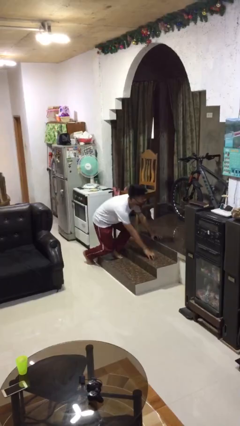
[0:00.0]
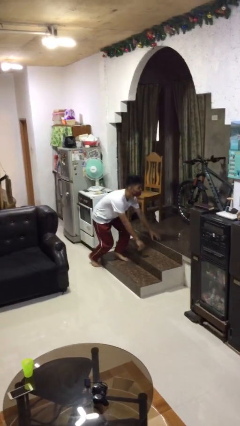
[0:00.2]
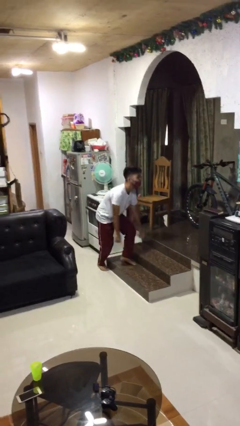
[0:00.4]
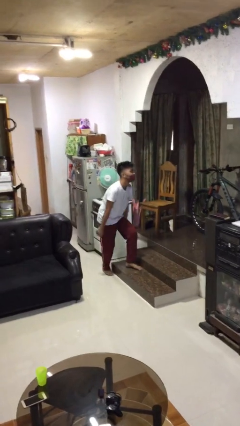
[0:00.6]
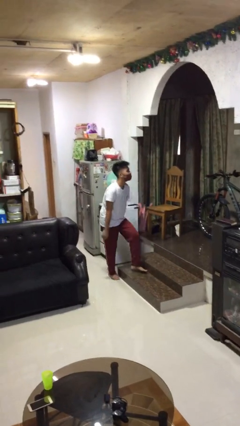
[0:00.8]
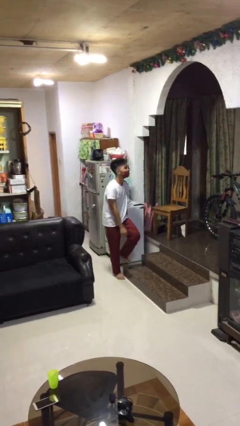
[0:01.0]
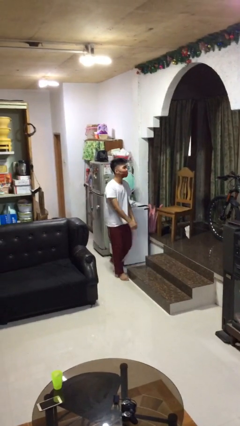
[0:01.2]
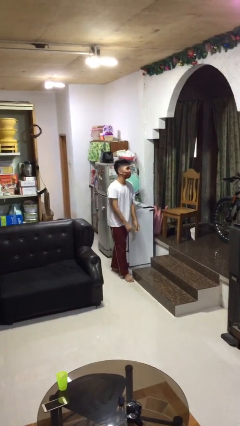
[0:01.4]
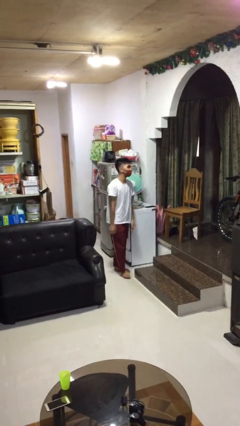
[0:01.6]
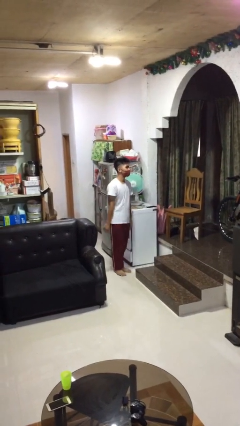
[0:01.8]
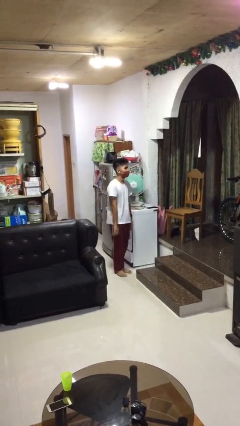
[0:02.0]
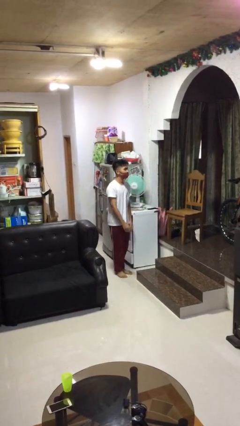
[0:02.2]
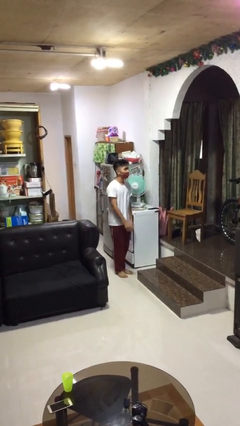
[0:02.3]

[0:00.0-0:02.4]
person stands up from floor

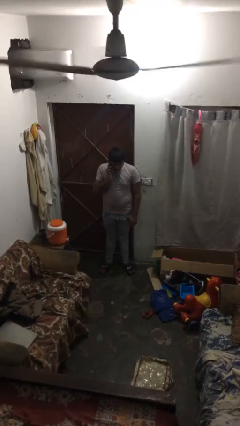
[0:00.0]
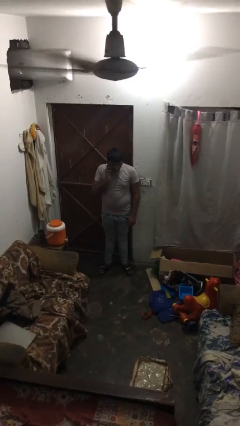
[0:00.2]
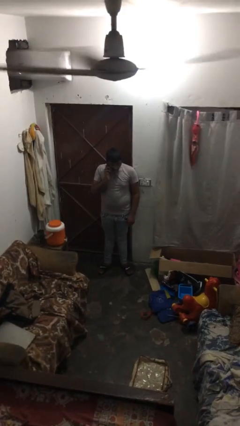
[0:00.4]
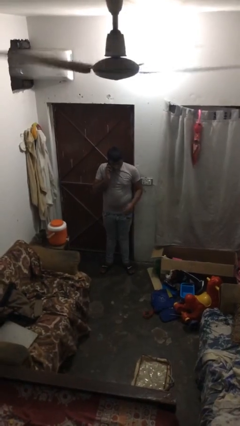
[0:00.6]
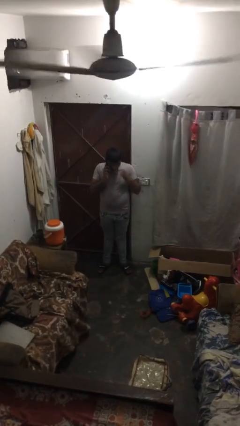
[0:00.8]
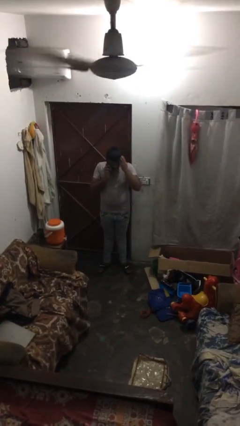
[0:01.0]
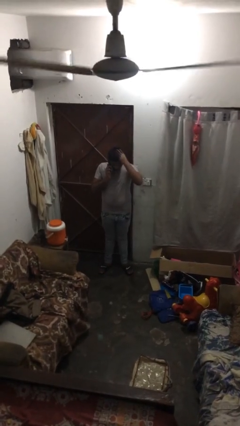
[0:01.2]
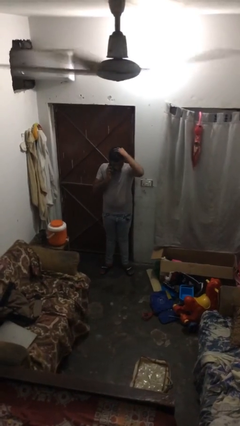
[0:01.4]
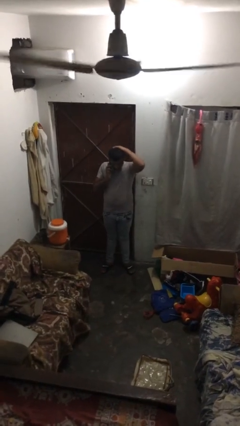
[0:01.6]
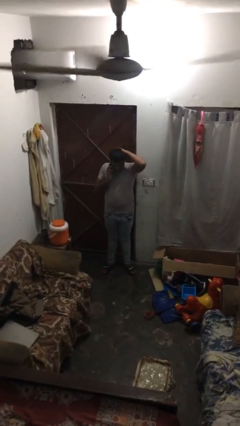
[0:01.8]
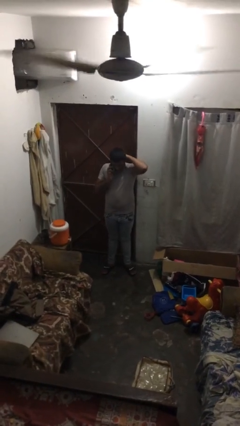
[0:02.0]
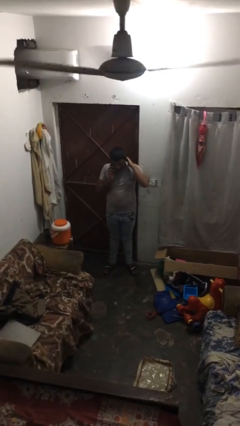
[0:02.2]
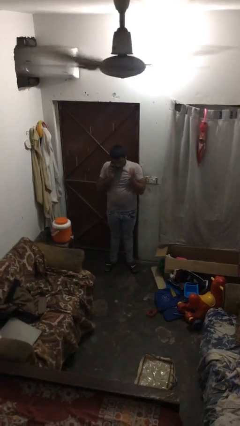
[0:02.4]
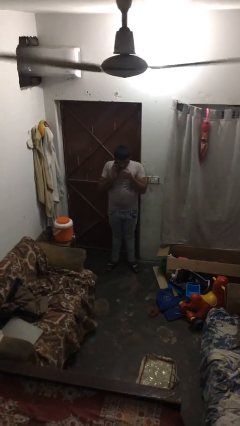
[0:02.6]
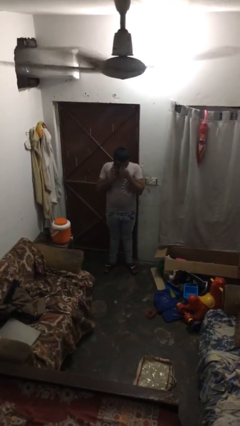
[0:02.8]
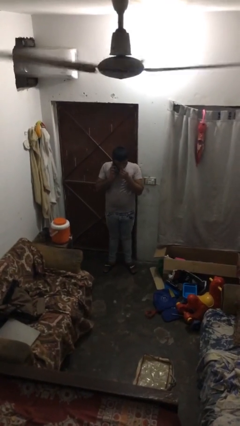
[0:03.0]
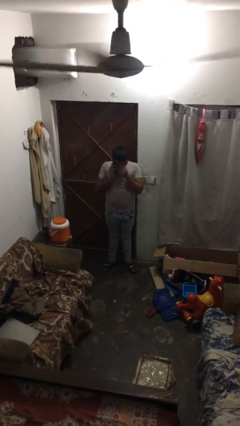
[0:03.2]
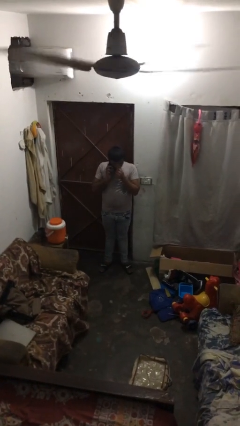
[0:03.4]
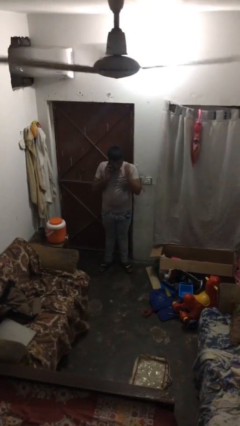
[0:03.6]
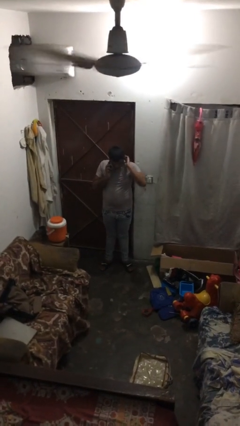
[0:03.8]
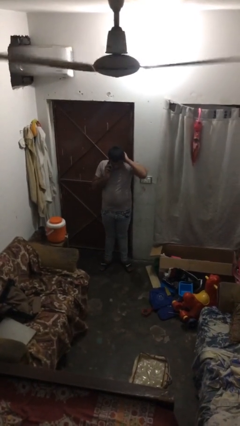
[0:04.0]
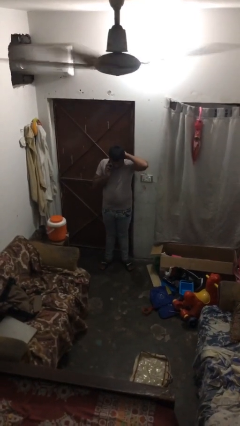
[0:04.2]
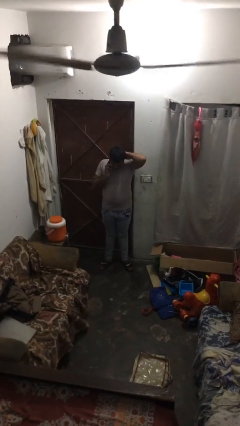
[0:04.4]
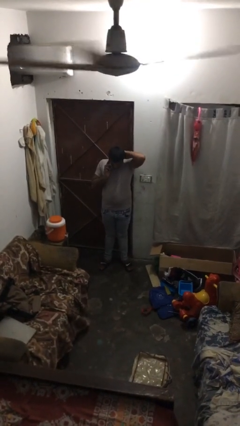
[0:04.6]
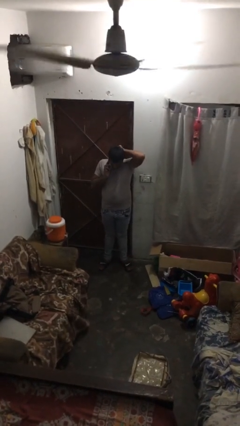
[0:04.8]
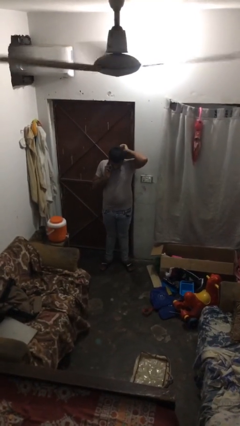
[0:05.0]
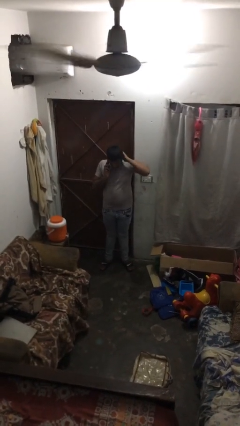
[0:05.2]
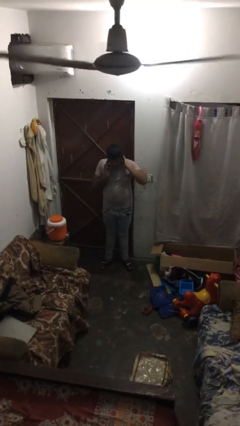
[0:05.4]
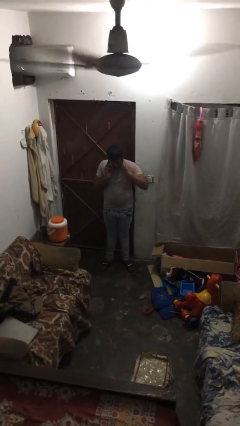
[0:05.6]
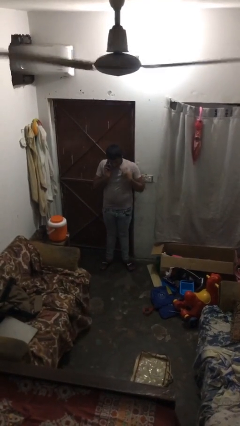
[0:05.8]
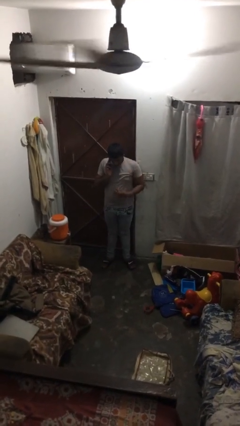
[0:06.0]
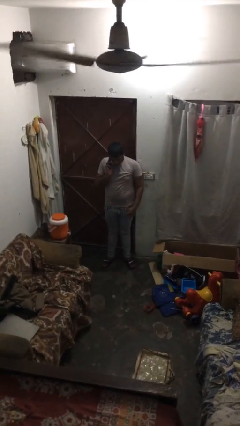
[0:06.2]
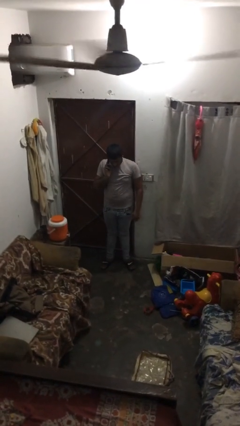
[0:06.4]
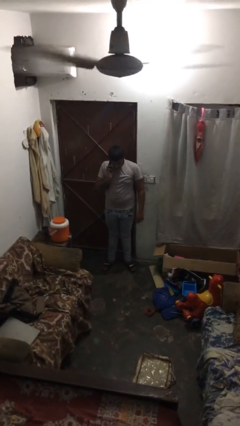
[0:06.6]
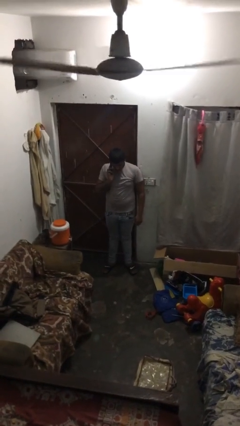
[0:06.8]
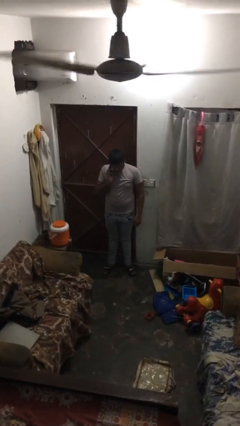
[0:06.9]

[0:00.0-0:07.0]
person talks on phone

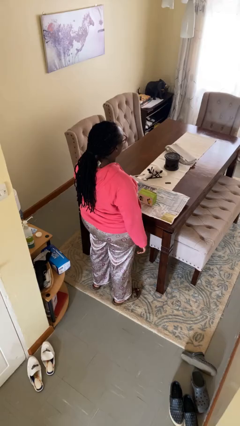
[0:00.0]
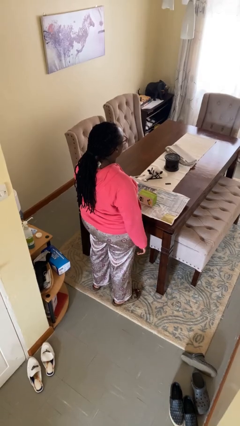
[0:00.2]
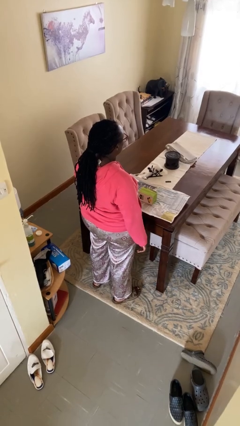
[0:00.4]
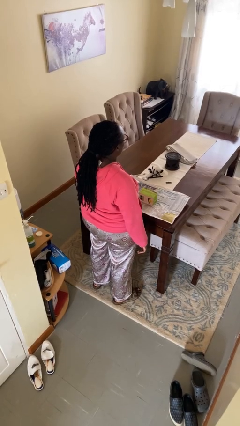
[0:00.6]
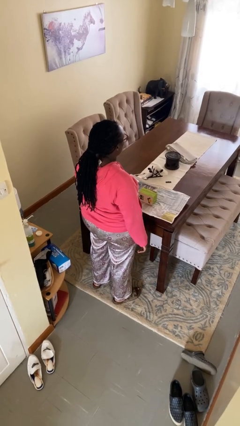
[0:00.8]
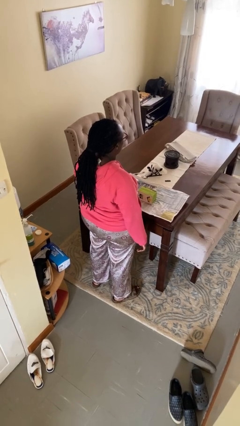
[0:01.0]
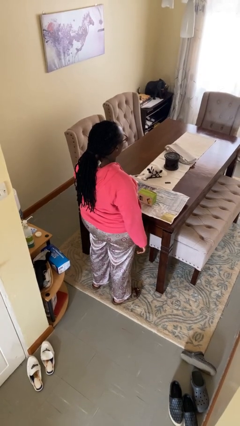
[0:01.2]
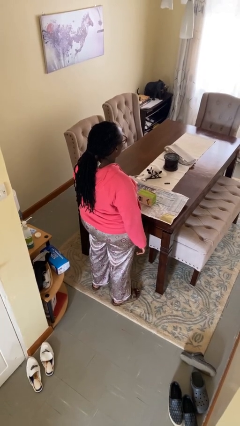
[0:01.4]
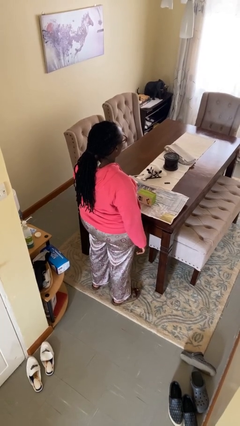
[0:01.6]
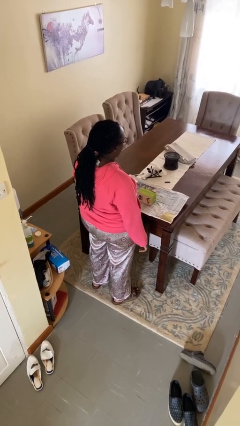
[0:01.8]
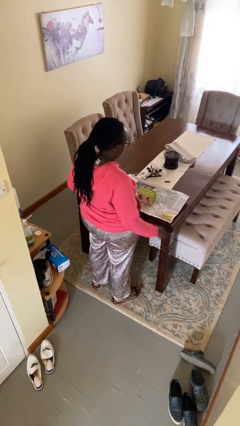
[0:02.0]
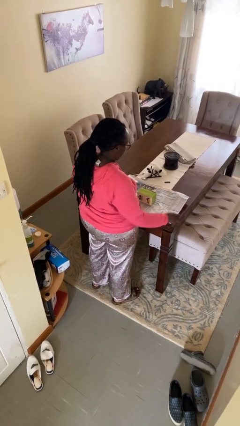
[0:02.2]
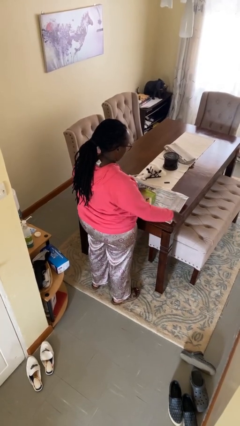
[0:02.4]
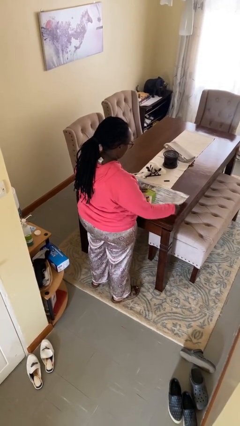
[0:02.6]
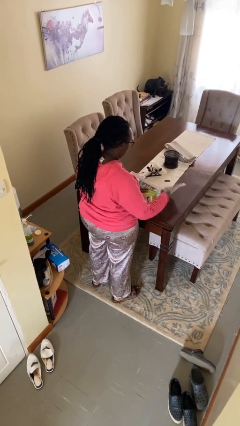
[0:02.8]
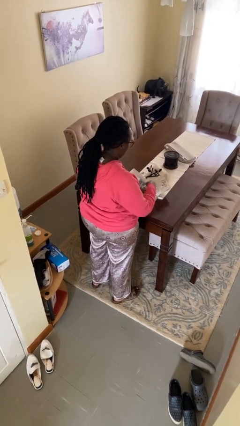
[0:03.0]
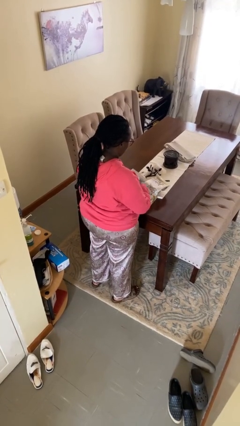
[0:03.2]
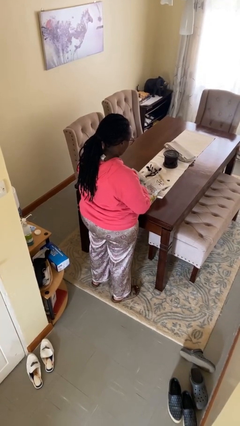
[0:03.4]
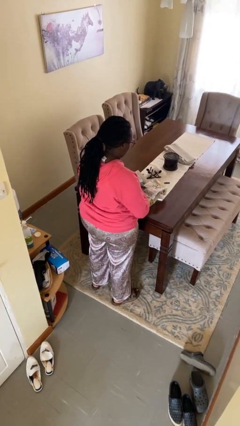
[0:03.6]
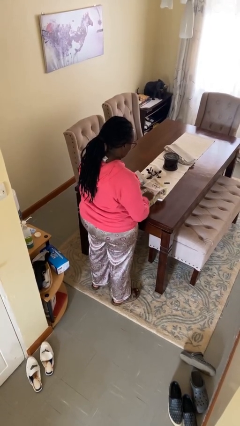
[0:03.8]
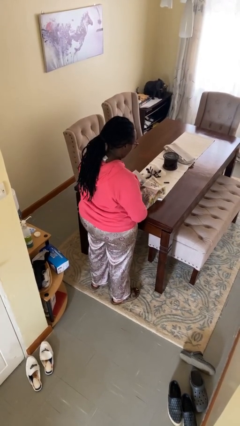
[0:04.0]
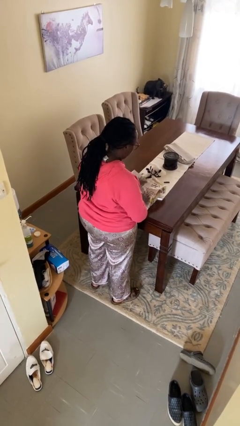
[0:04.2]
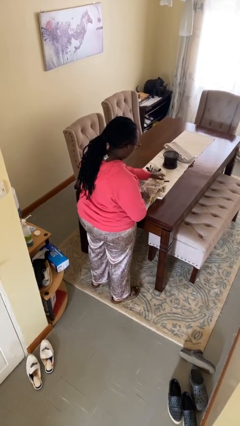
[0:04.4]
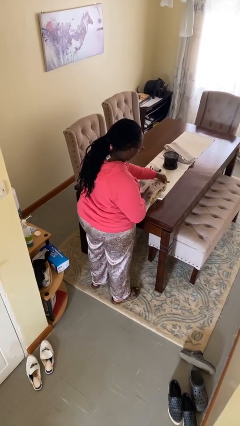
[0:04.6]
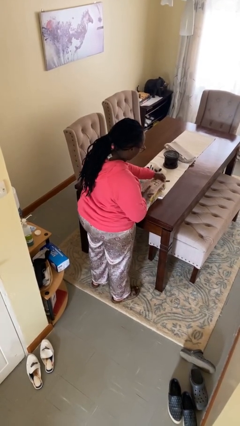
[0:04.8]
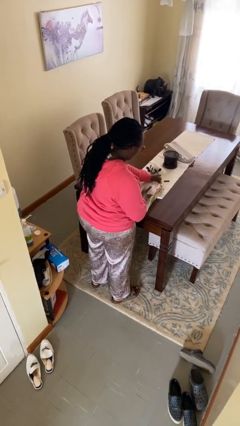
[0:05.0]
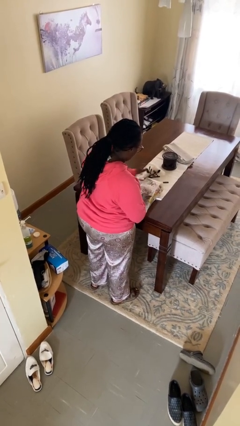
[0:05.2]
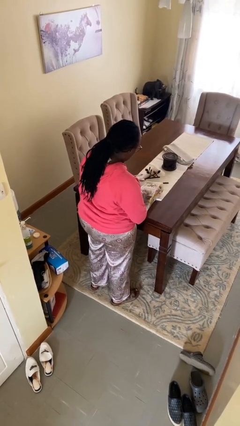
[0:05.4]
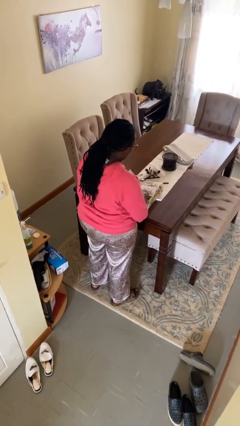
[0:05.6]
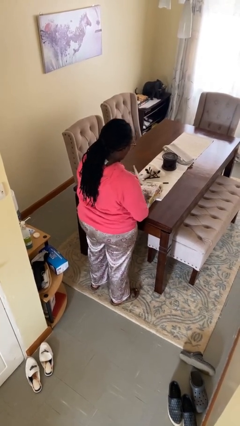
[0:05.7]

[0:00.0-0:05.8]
person wraps box

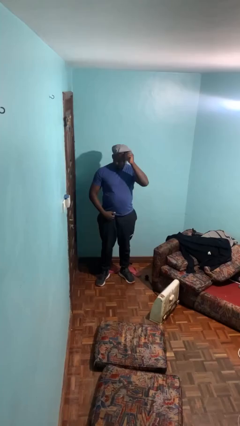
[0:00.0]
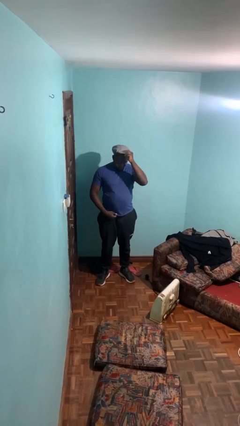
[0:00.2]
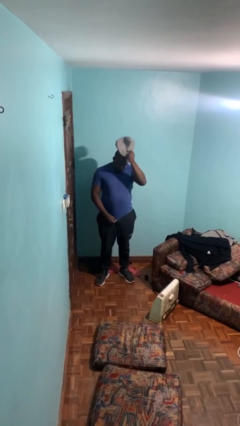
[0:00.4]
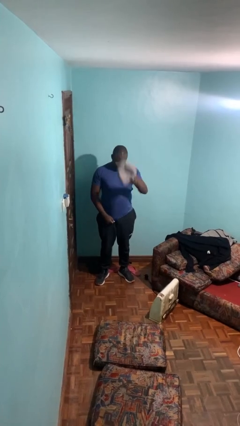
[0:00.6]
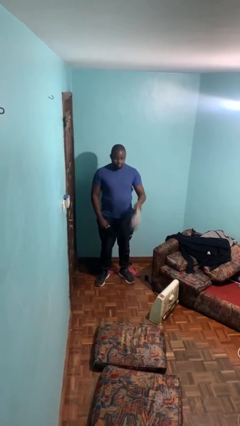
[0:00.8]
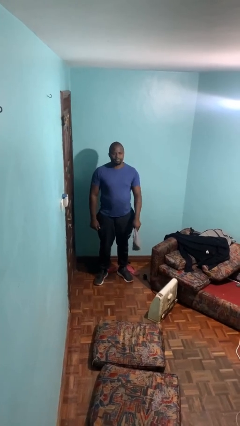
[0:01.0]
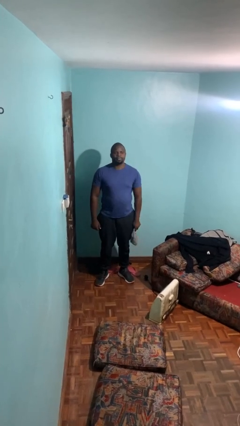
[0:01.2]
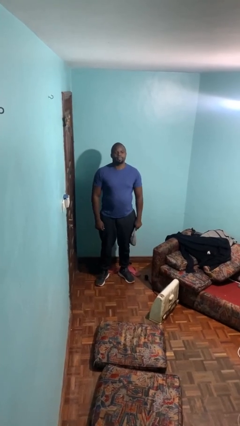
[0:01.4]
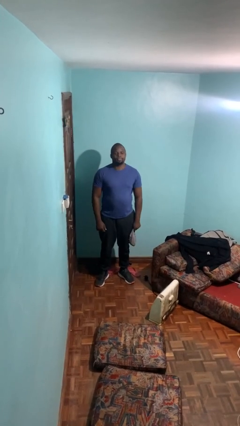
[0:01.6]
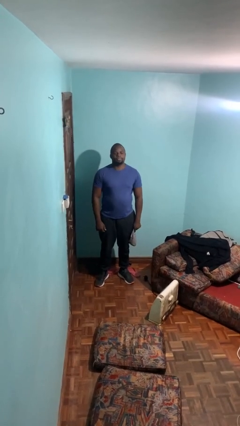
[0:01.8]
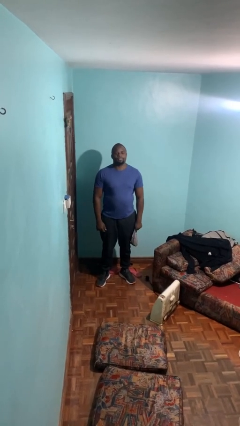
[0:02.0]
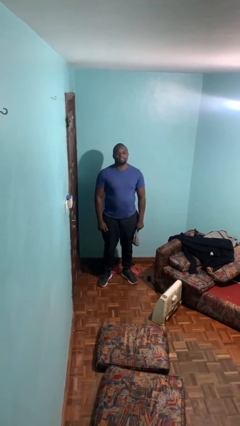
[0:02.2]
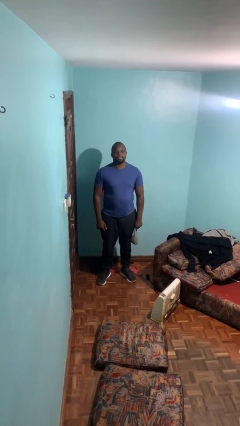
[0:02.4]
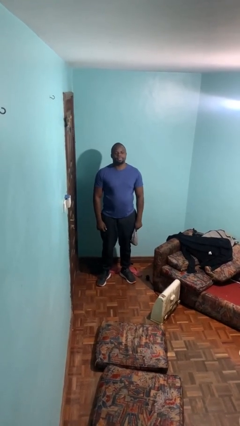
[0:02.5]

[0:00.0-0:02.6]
person takes off hat
